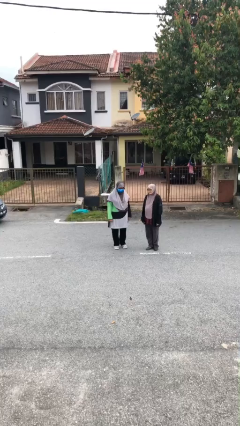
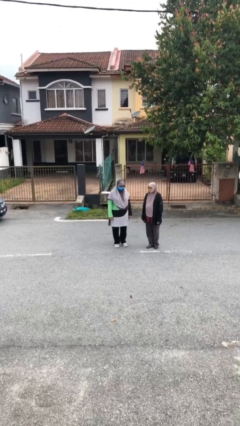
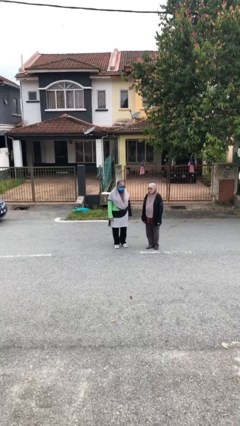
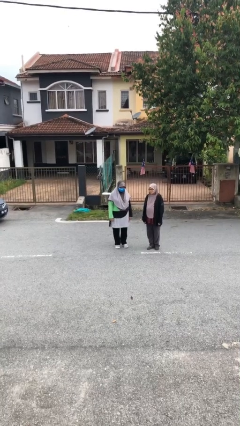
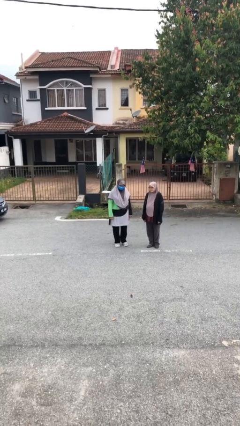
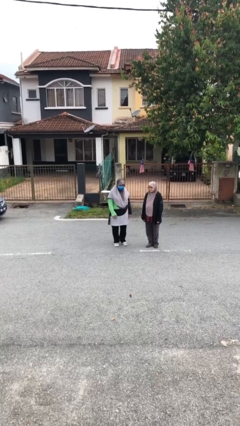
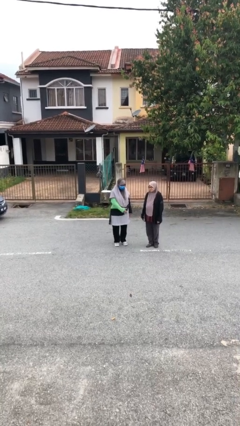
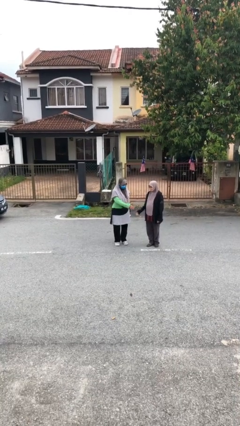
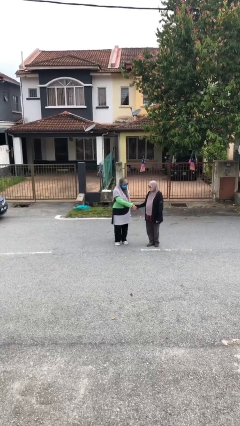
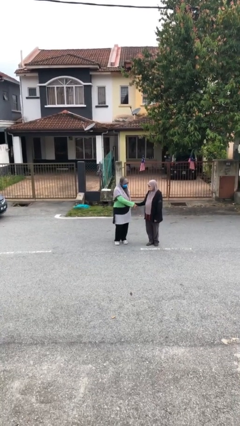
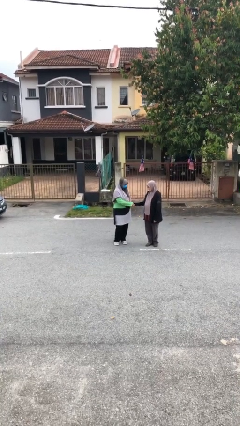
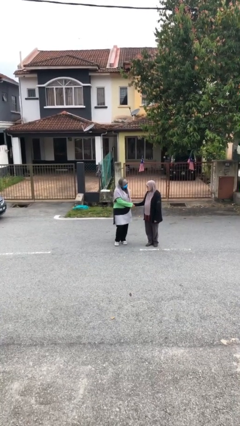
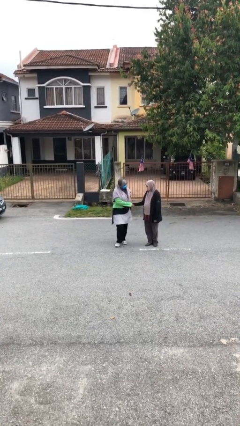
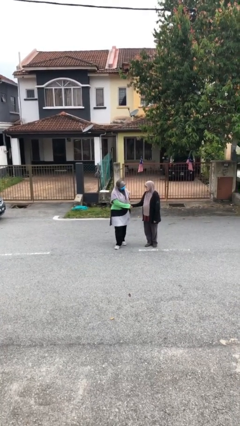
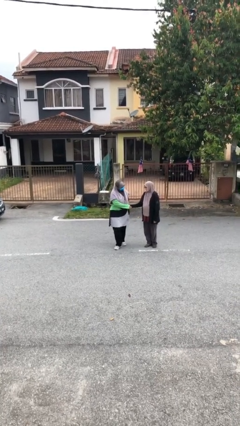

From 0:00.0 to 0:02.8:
person shakes hand

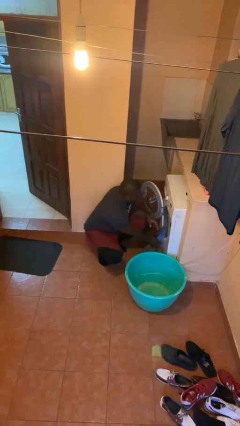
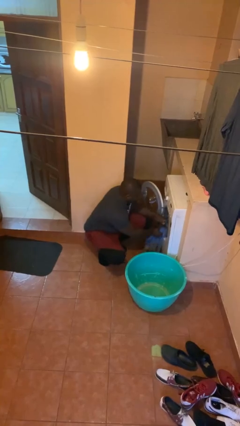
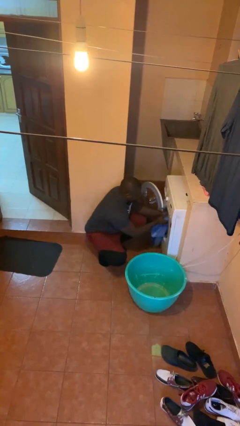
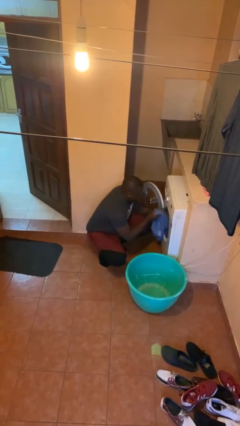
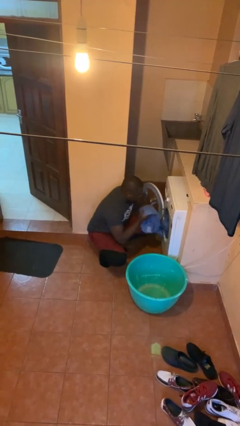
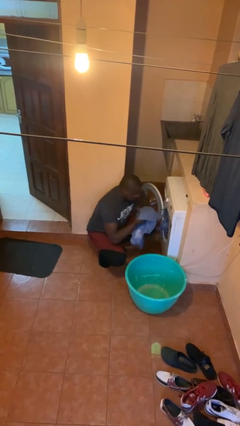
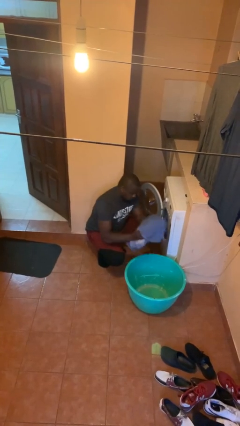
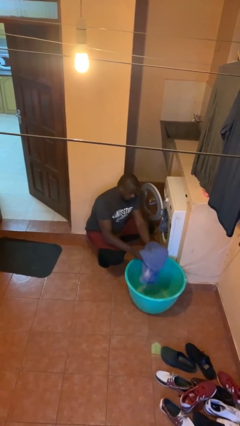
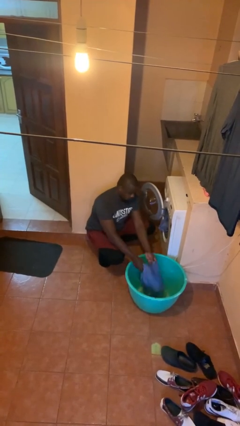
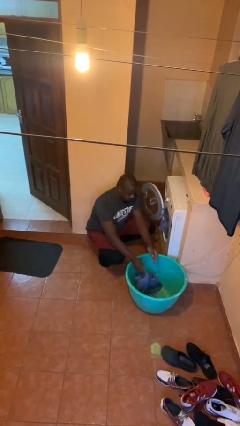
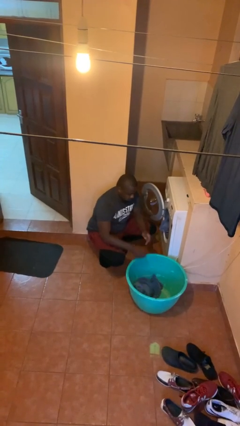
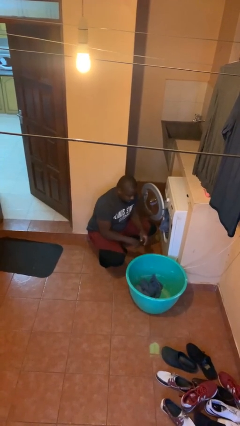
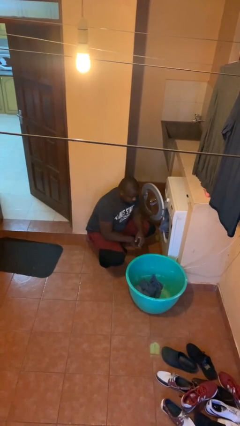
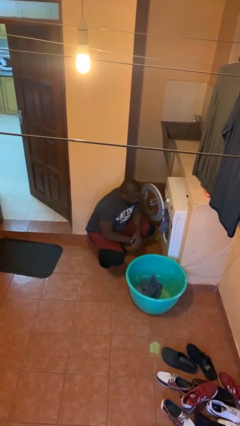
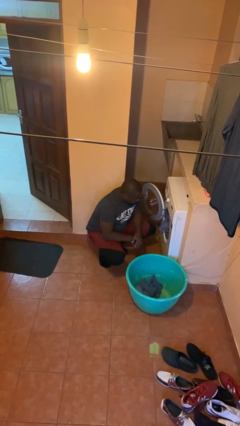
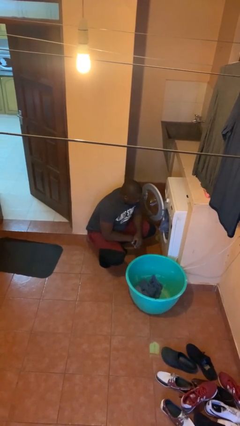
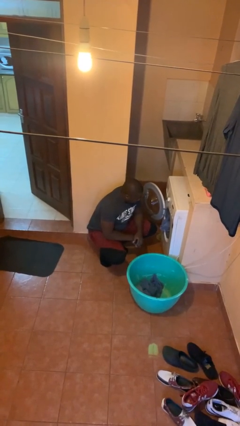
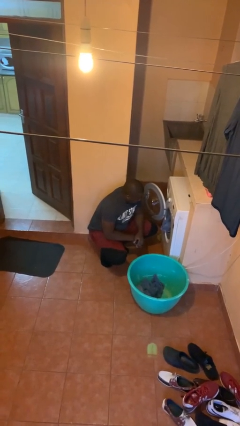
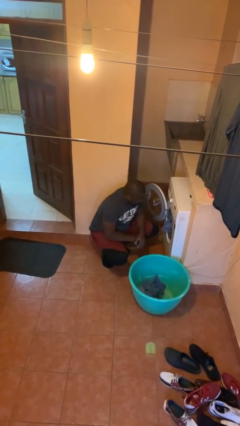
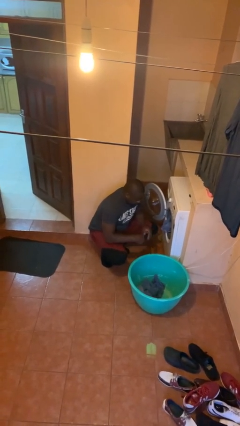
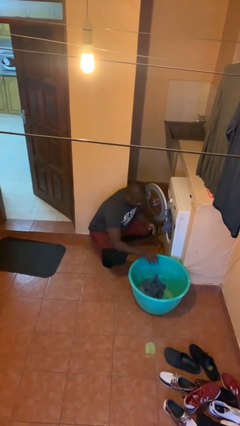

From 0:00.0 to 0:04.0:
person unloads clotheswasher

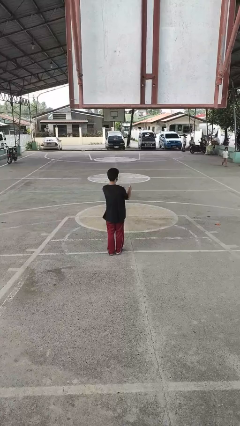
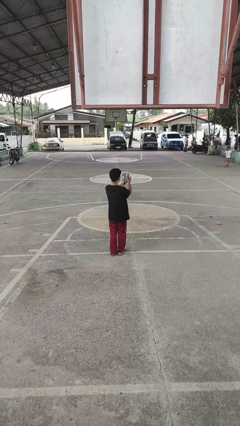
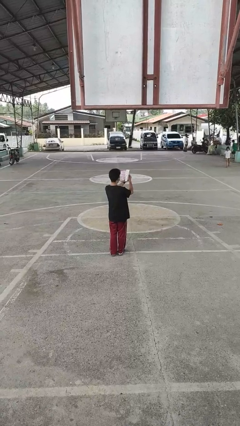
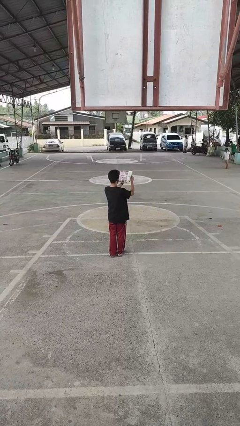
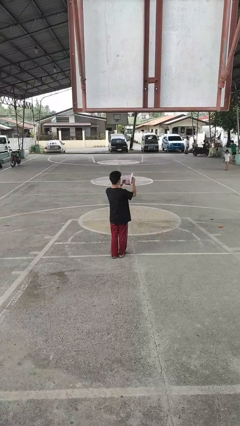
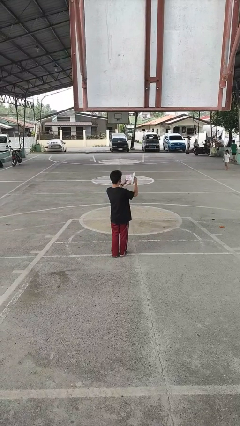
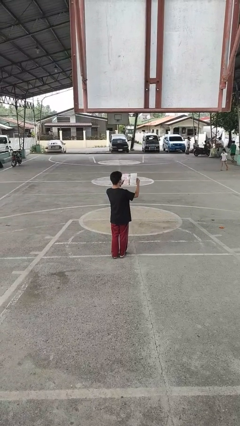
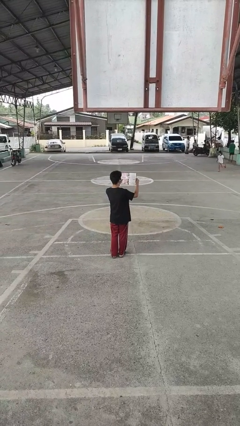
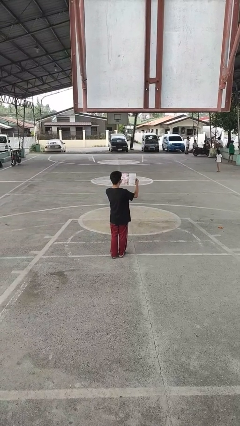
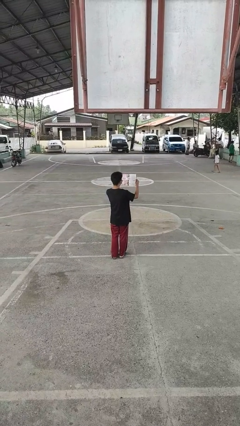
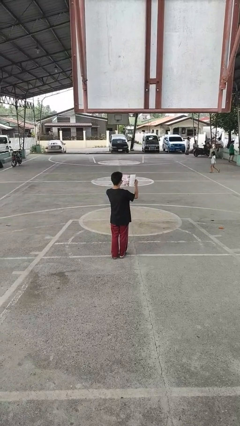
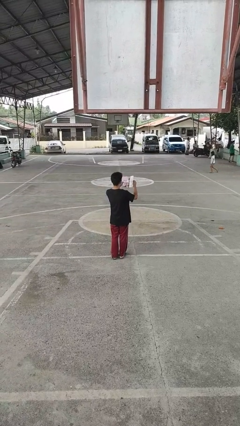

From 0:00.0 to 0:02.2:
person reads magazine

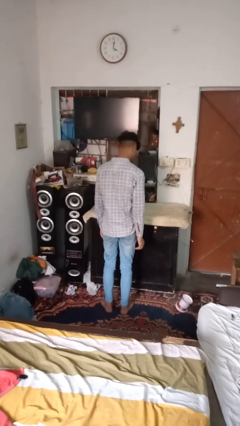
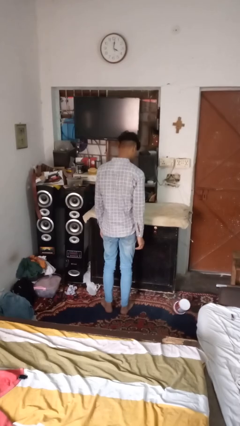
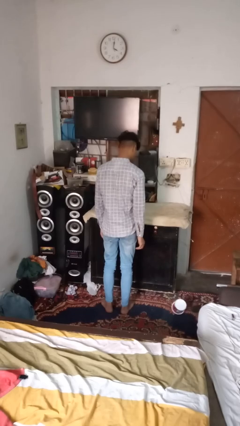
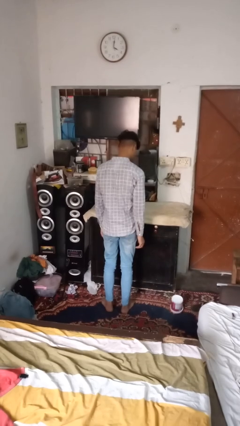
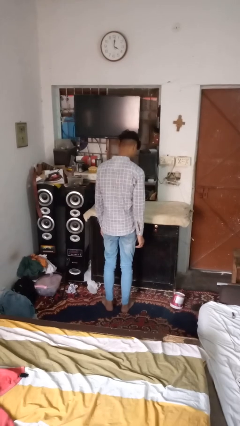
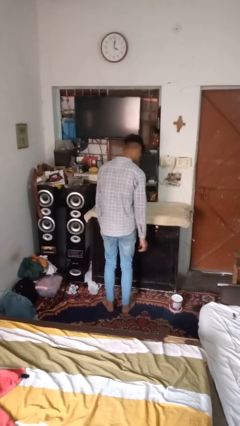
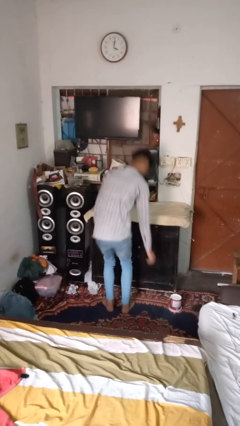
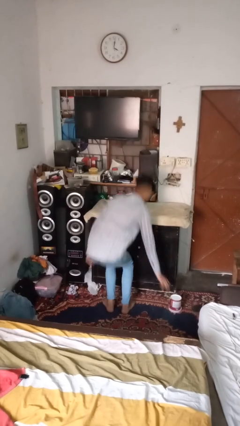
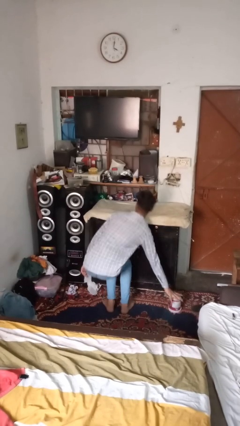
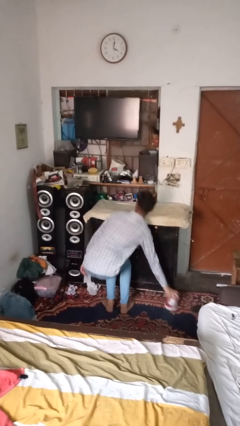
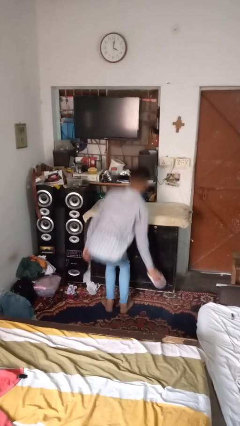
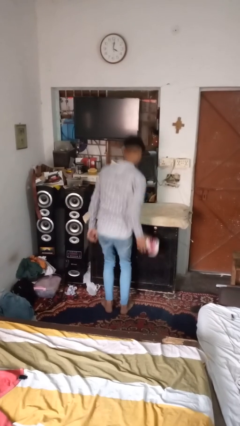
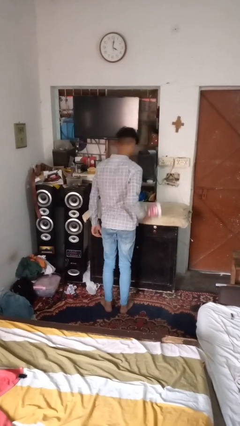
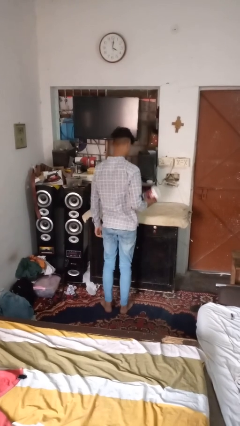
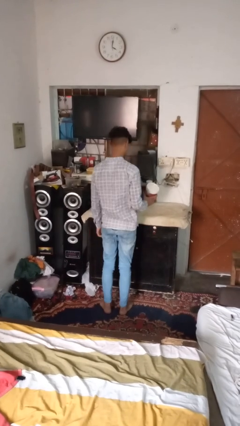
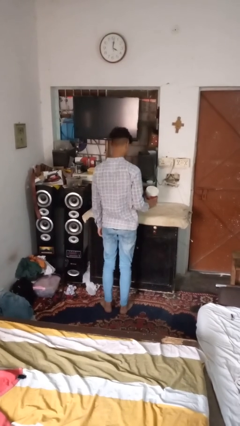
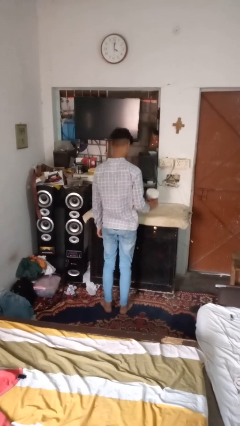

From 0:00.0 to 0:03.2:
person sets upright furniture

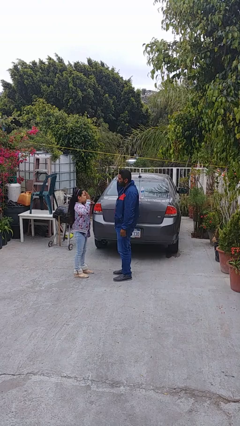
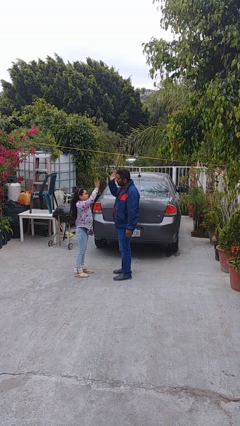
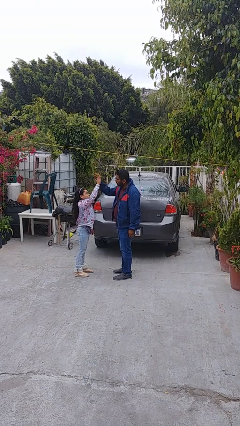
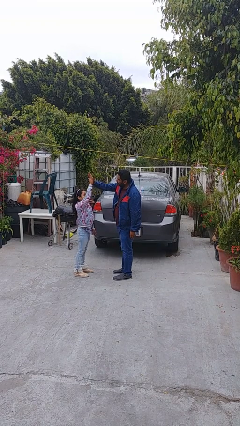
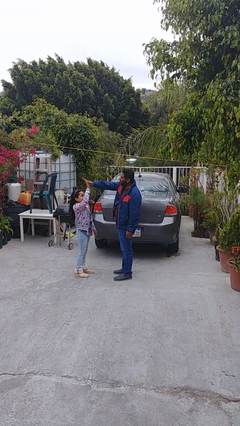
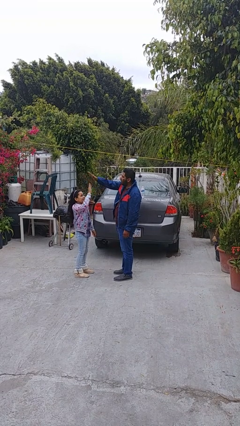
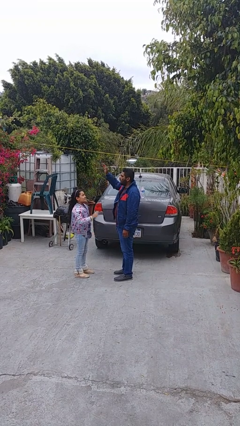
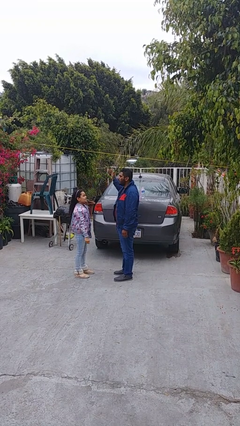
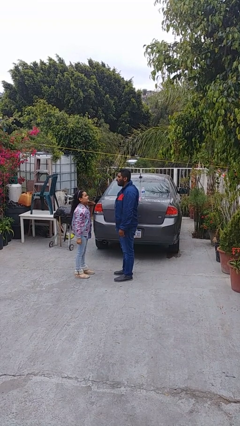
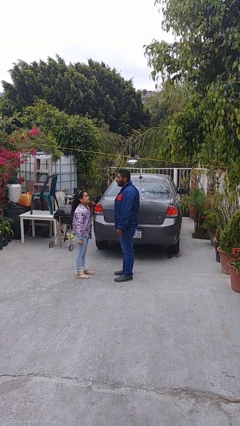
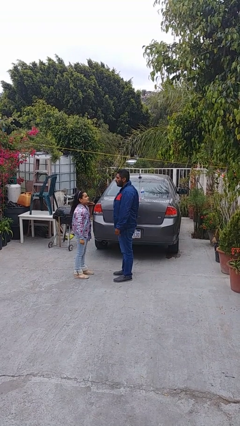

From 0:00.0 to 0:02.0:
person highfives hand

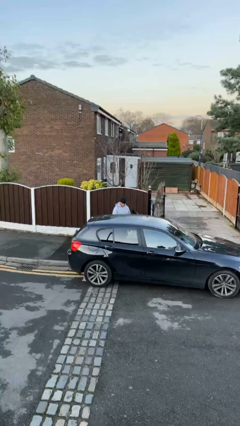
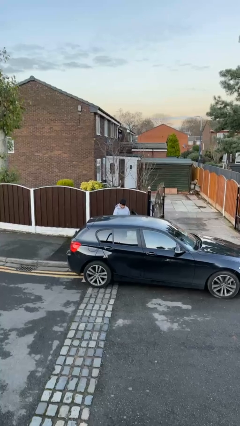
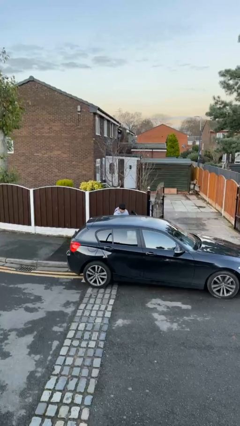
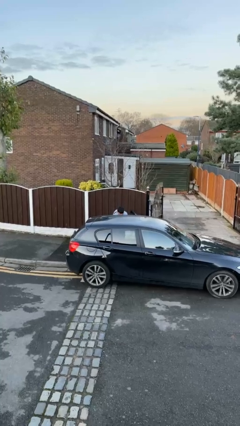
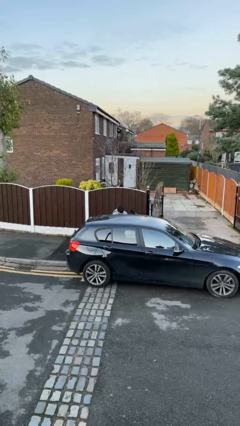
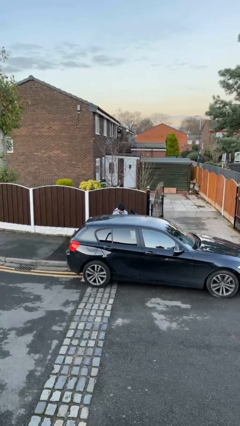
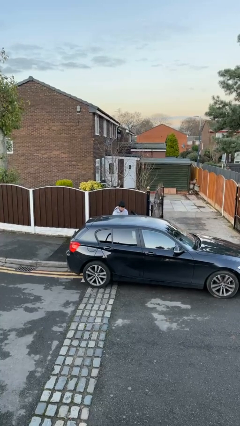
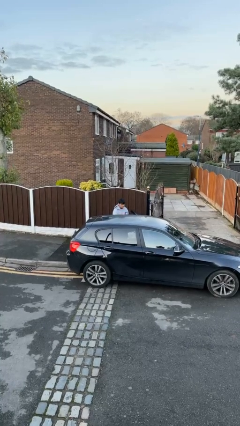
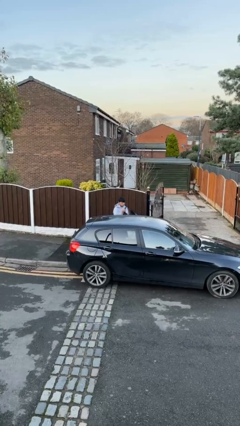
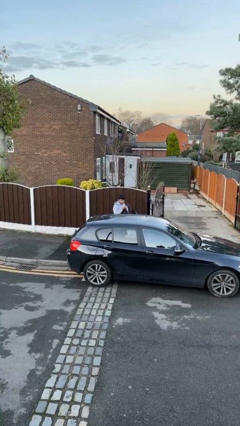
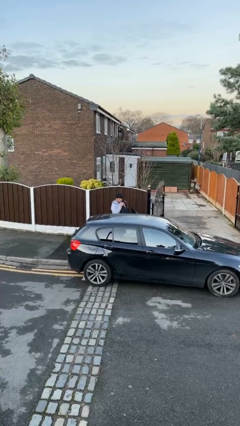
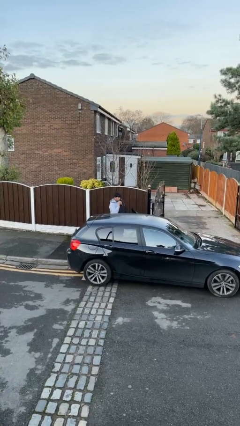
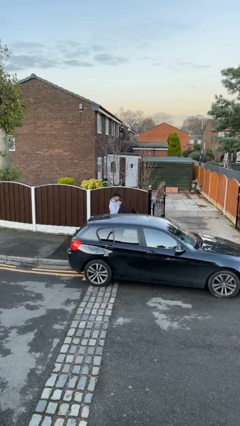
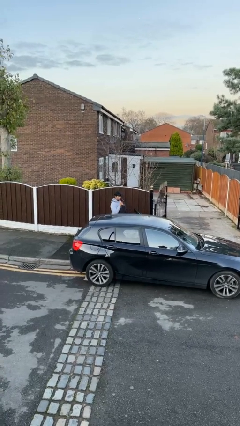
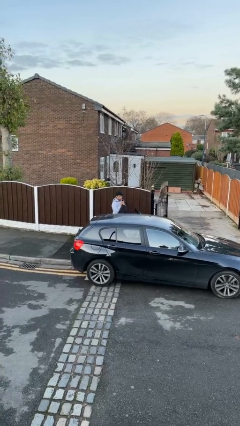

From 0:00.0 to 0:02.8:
person unloads car

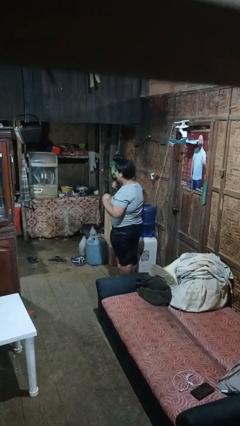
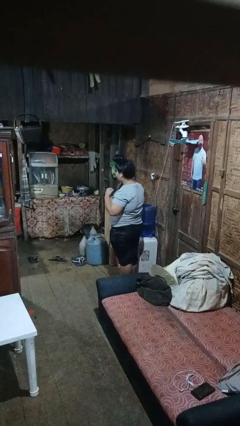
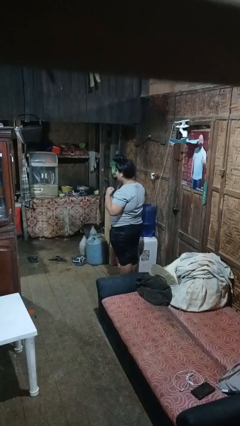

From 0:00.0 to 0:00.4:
person punches
